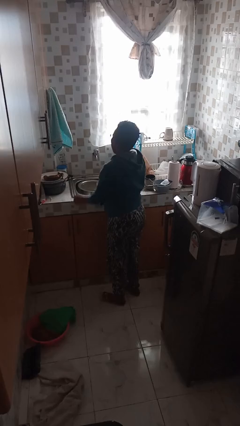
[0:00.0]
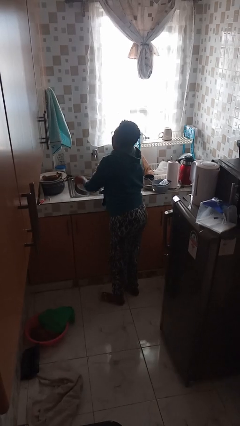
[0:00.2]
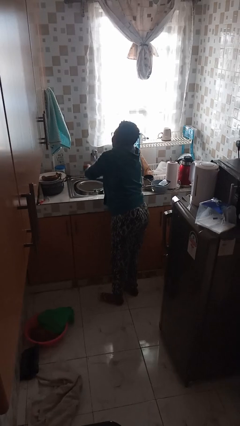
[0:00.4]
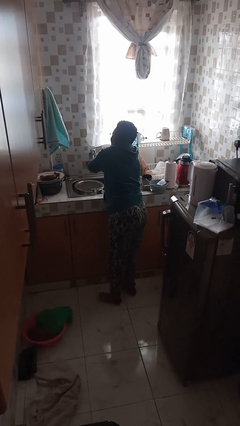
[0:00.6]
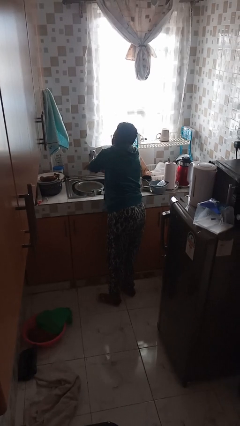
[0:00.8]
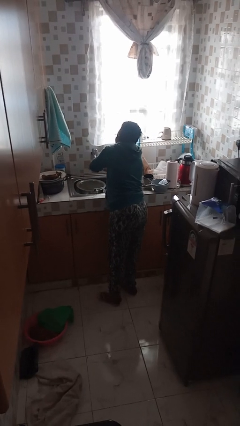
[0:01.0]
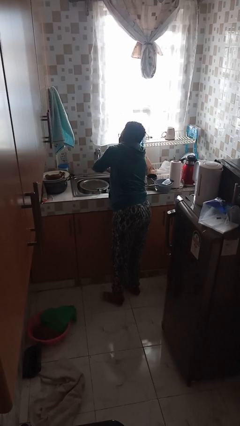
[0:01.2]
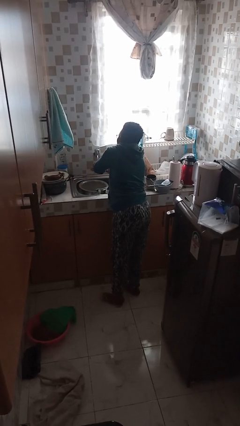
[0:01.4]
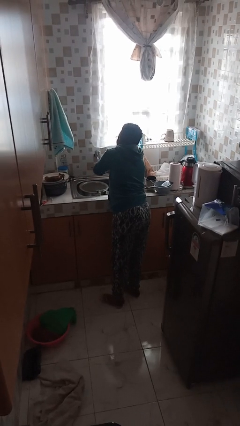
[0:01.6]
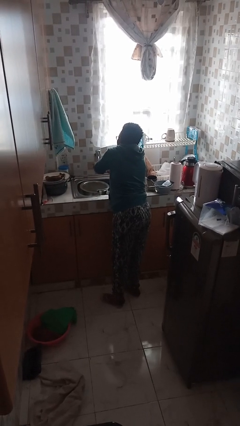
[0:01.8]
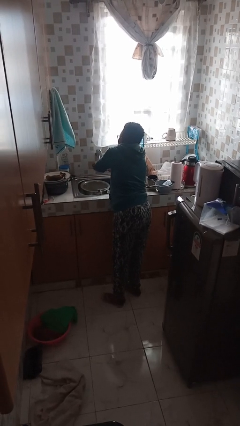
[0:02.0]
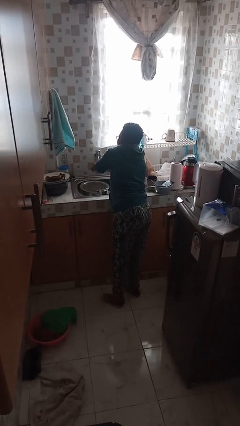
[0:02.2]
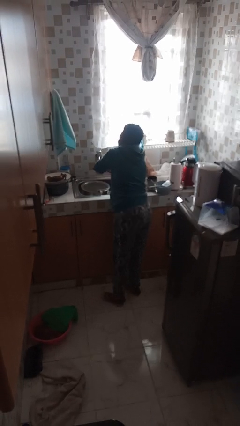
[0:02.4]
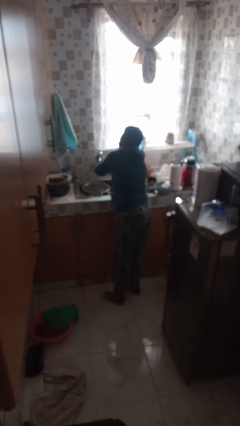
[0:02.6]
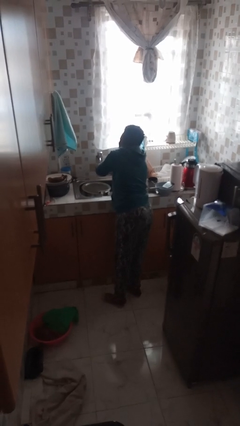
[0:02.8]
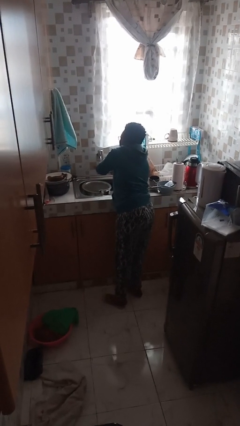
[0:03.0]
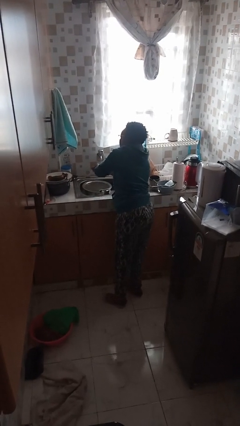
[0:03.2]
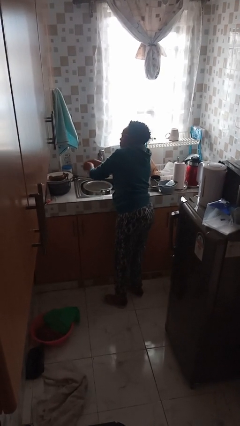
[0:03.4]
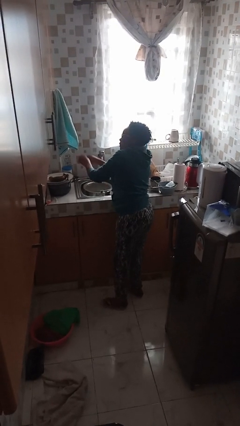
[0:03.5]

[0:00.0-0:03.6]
person washes hands

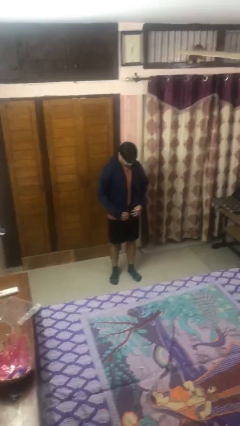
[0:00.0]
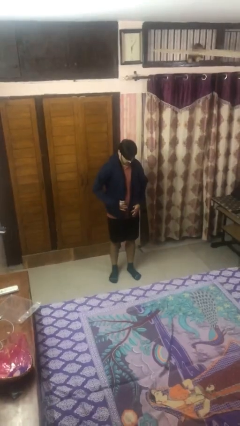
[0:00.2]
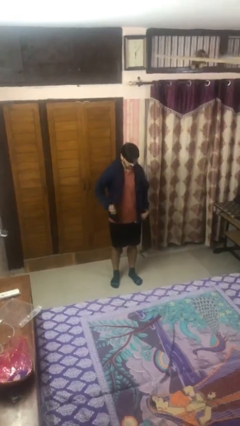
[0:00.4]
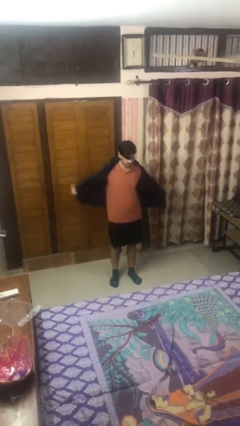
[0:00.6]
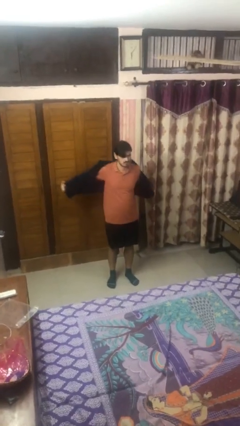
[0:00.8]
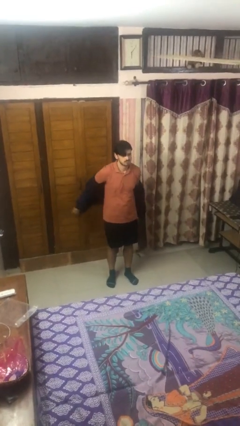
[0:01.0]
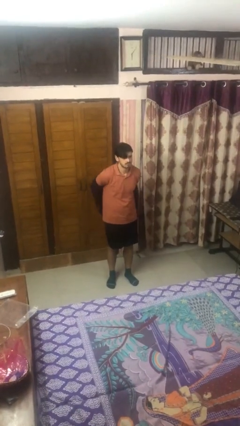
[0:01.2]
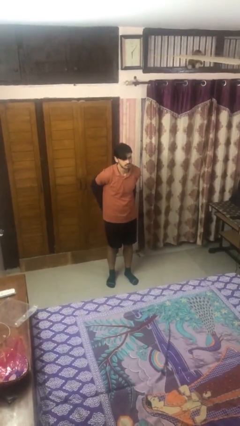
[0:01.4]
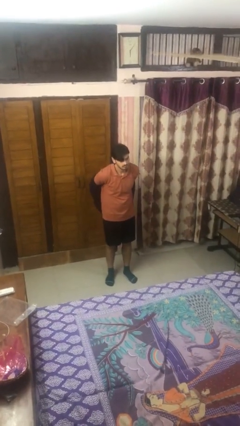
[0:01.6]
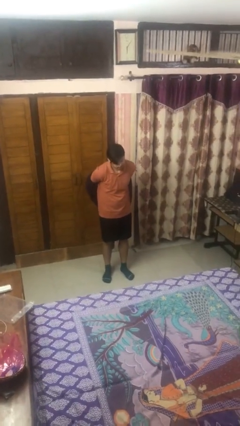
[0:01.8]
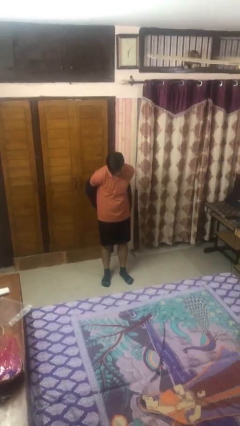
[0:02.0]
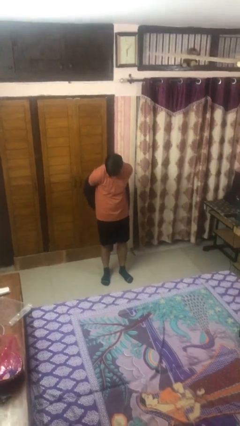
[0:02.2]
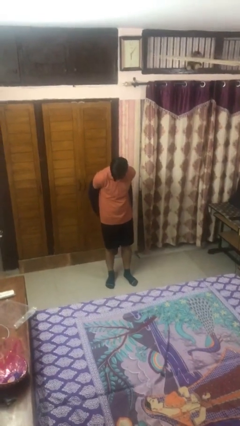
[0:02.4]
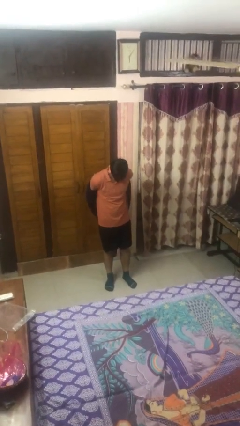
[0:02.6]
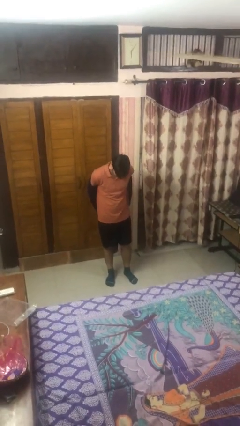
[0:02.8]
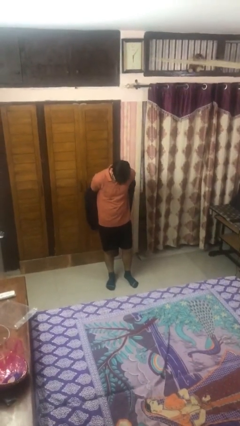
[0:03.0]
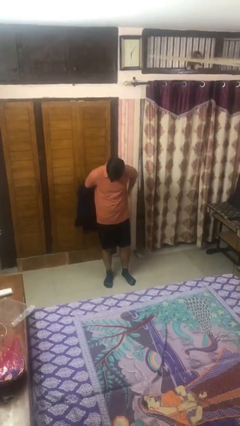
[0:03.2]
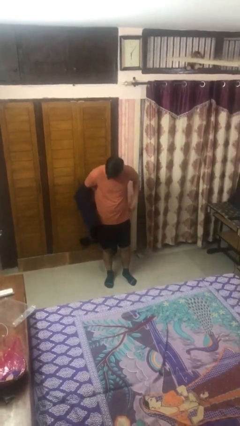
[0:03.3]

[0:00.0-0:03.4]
person takes off jacket

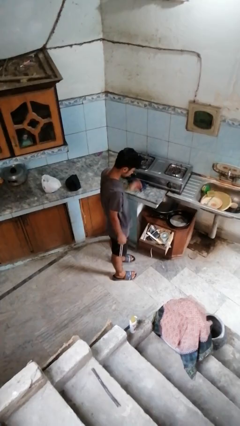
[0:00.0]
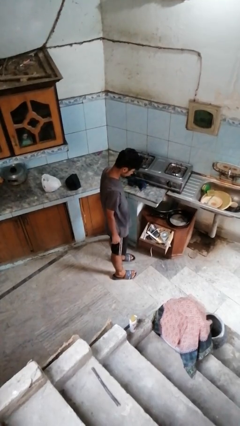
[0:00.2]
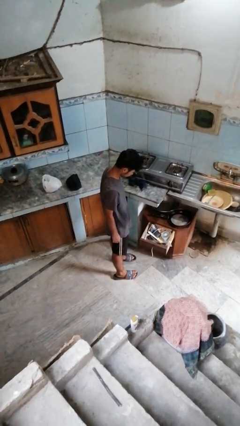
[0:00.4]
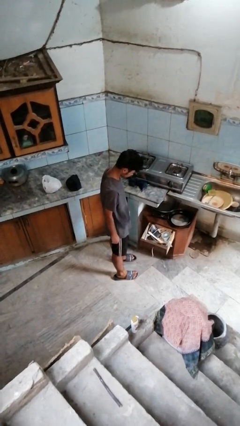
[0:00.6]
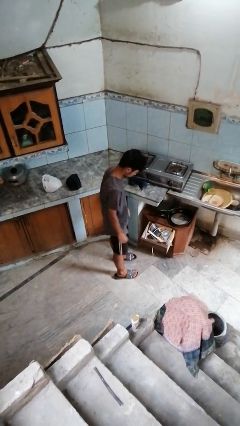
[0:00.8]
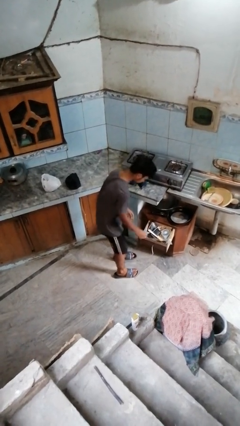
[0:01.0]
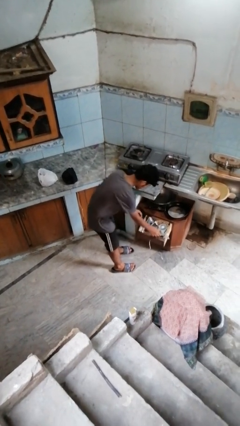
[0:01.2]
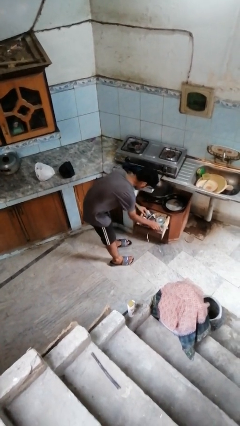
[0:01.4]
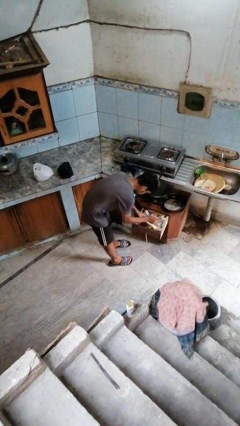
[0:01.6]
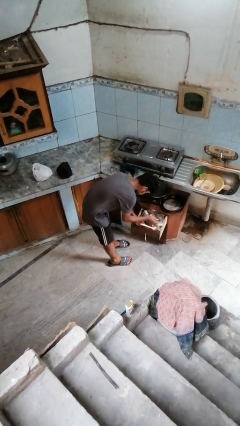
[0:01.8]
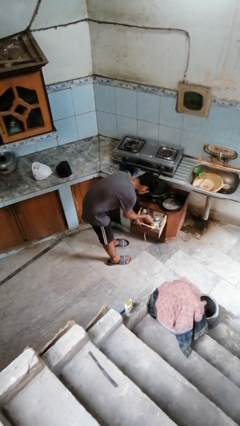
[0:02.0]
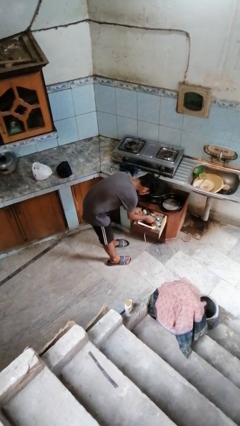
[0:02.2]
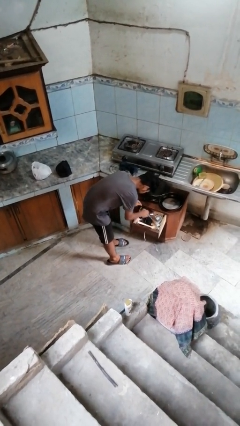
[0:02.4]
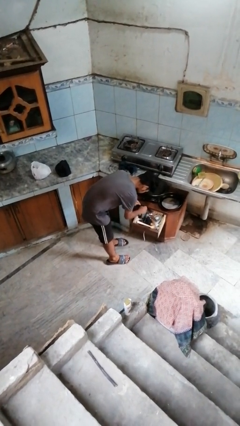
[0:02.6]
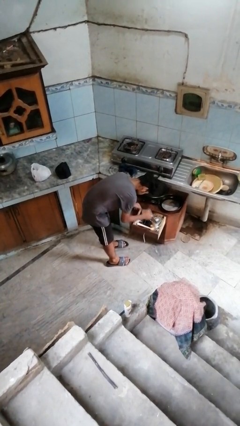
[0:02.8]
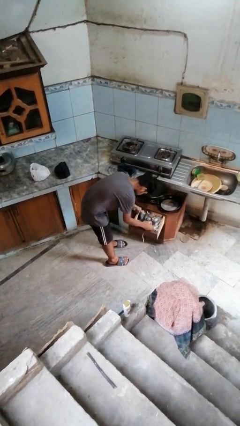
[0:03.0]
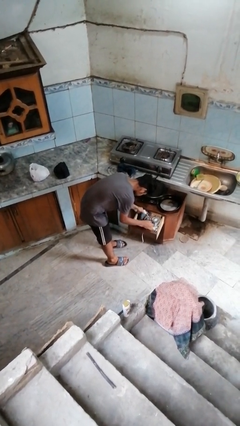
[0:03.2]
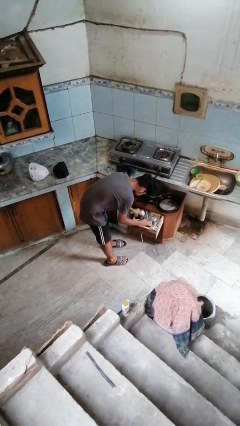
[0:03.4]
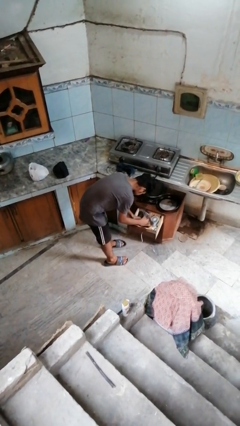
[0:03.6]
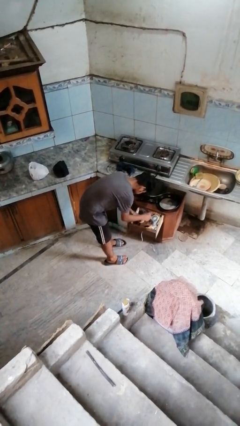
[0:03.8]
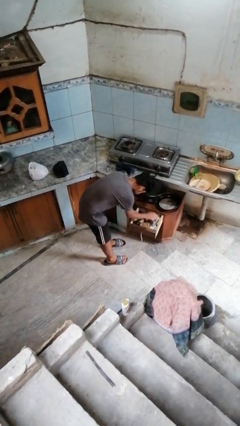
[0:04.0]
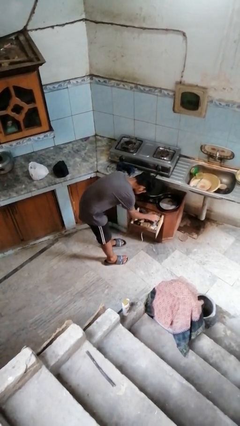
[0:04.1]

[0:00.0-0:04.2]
person searches in kitchen drawer

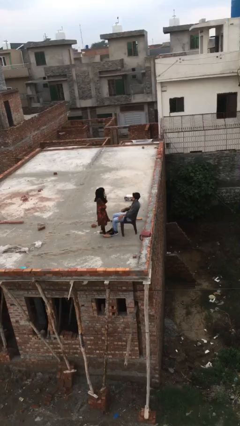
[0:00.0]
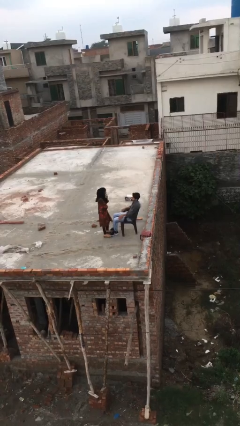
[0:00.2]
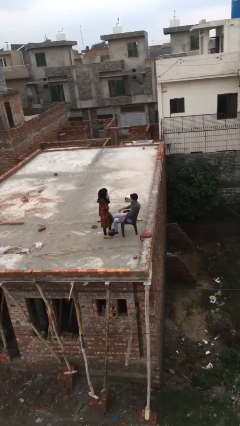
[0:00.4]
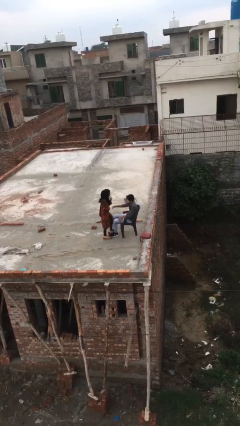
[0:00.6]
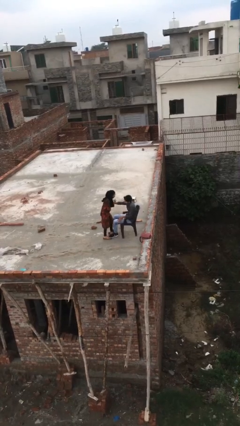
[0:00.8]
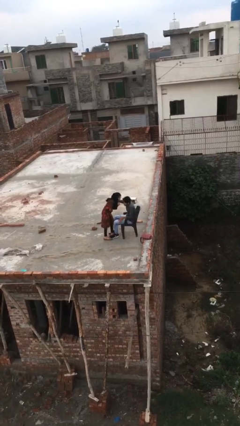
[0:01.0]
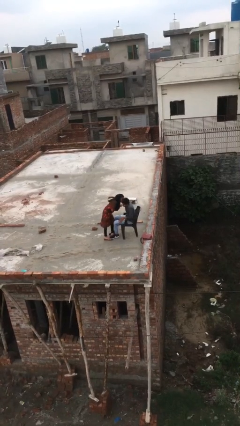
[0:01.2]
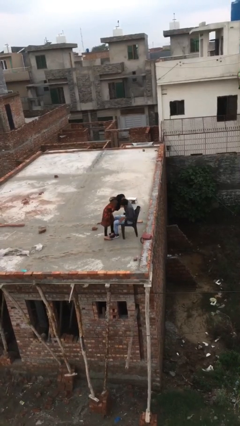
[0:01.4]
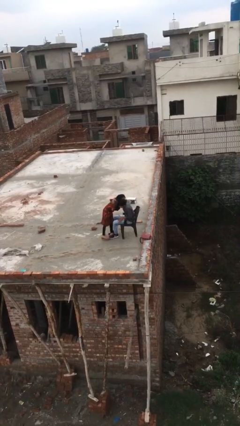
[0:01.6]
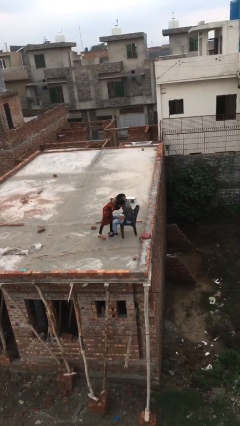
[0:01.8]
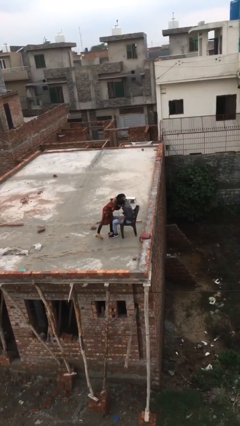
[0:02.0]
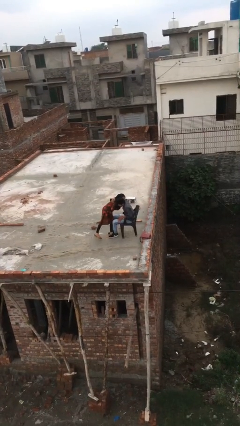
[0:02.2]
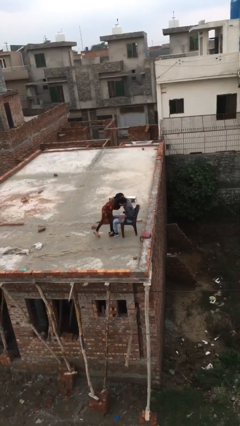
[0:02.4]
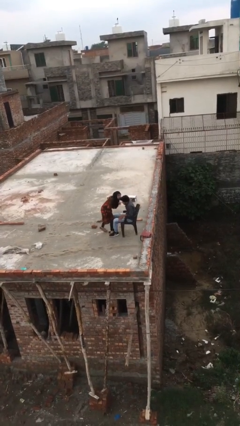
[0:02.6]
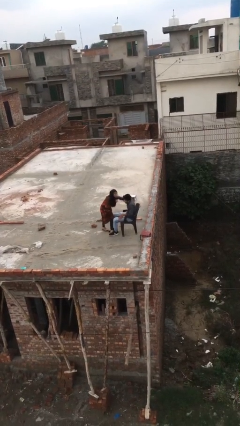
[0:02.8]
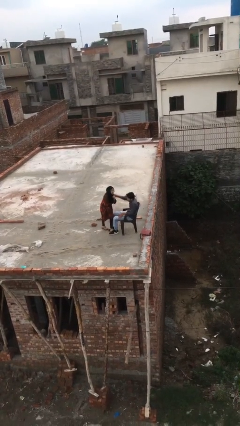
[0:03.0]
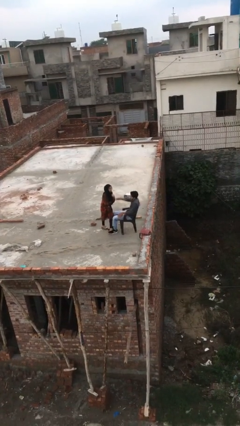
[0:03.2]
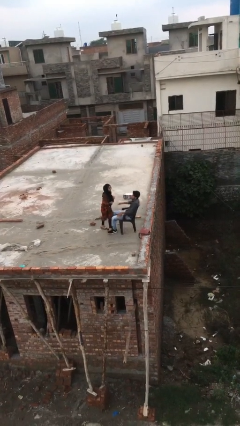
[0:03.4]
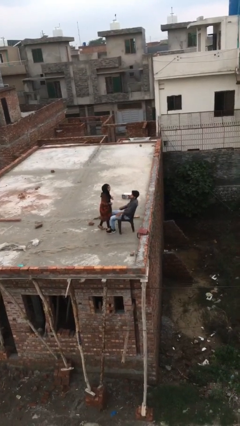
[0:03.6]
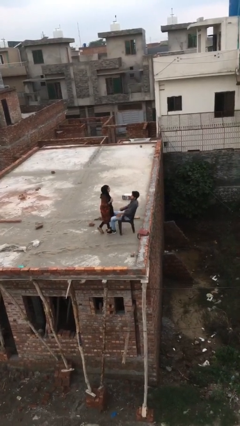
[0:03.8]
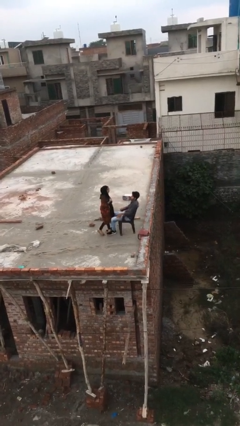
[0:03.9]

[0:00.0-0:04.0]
person embraces person

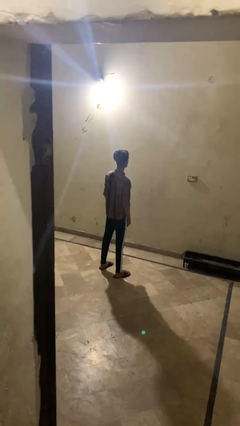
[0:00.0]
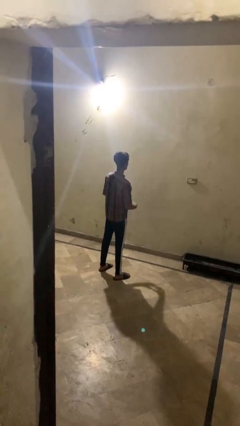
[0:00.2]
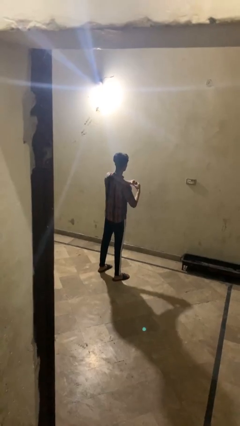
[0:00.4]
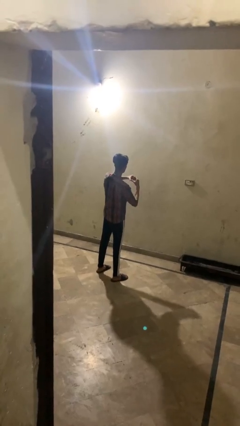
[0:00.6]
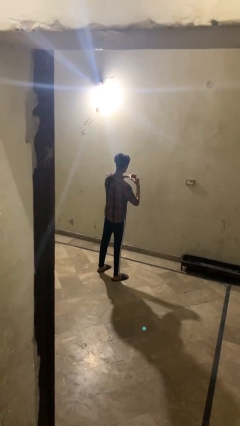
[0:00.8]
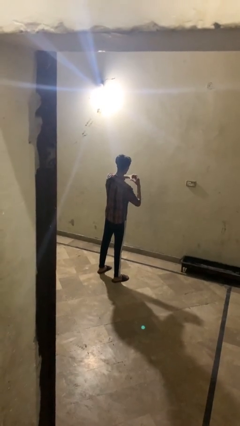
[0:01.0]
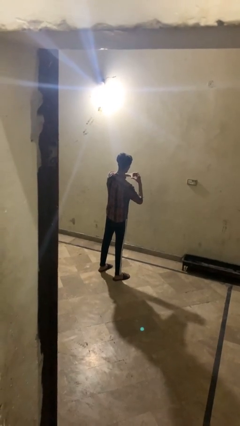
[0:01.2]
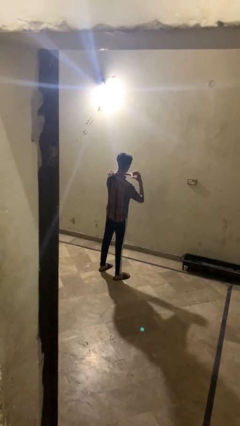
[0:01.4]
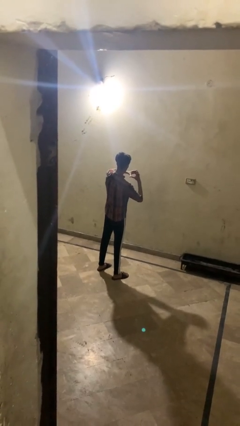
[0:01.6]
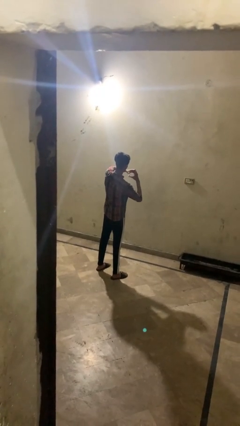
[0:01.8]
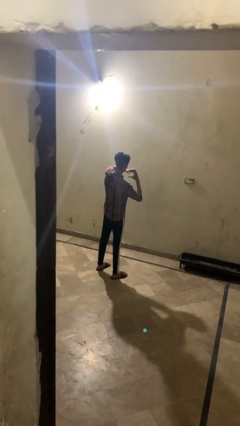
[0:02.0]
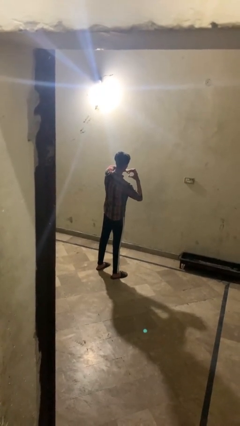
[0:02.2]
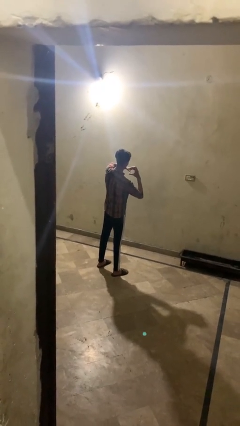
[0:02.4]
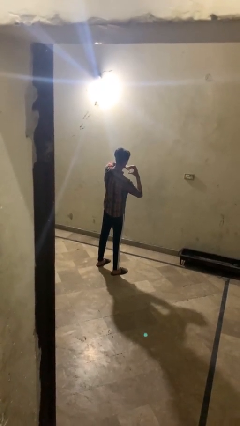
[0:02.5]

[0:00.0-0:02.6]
person gestures heart
